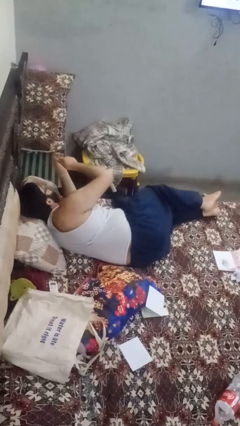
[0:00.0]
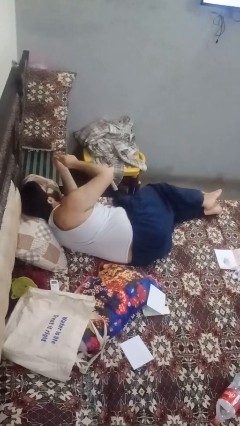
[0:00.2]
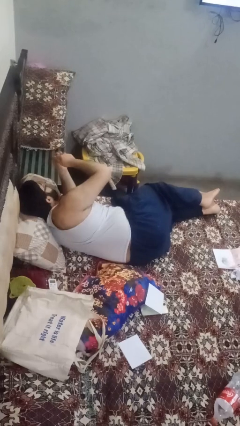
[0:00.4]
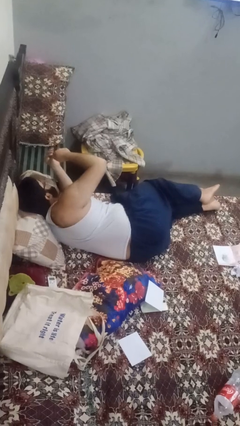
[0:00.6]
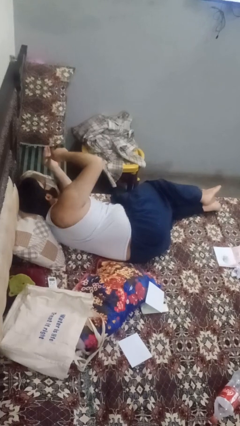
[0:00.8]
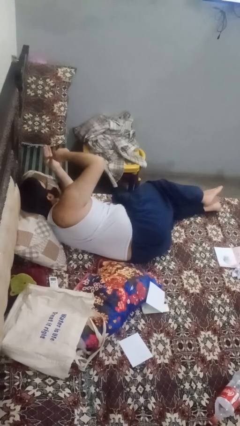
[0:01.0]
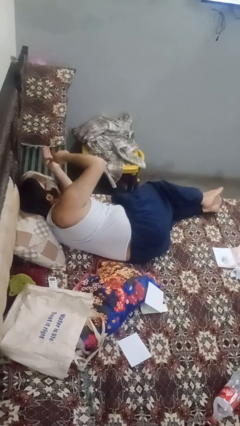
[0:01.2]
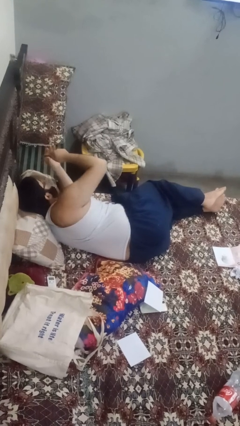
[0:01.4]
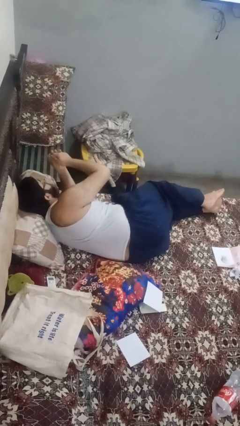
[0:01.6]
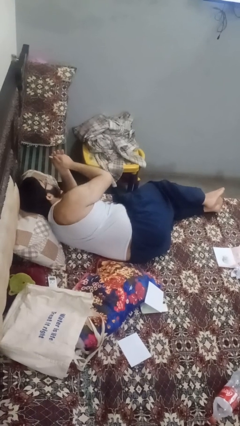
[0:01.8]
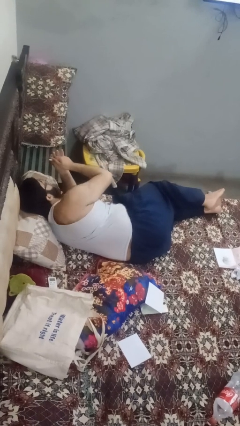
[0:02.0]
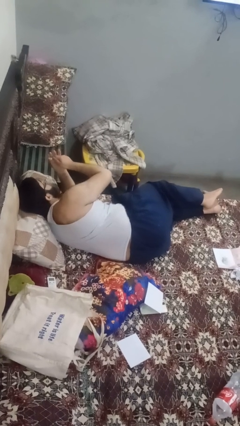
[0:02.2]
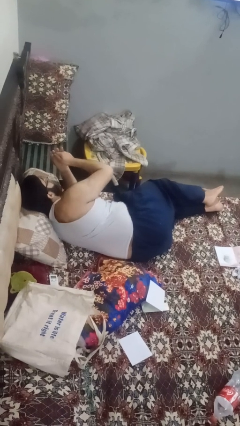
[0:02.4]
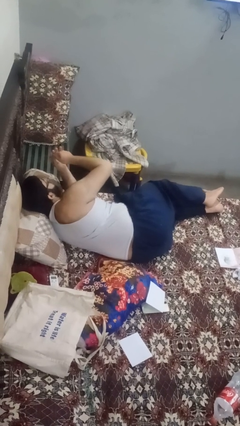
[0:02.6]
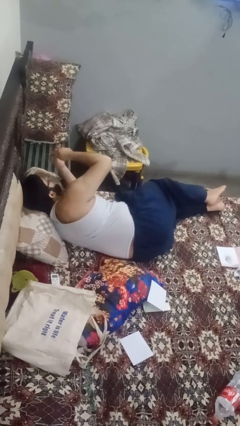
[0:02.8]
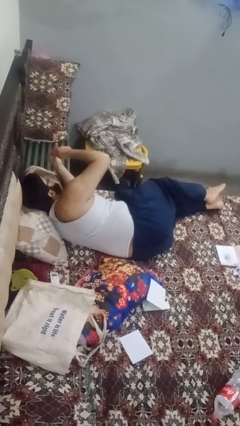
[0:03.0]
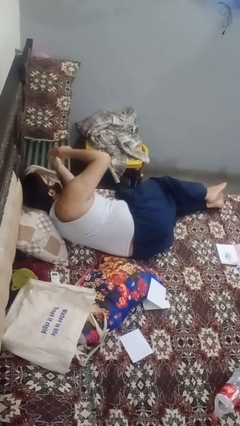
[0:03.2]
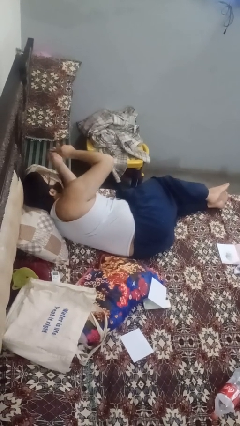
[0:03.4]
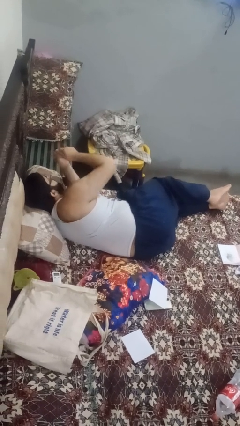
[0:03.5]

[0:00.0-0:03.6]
person files fingernails

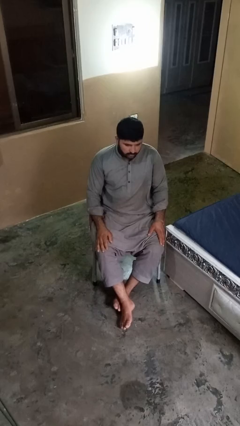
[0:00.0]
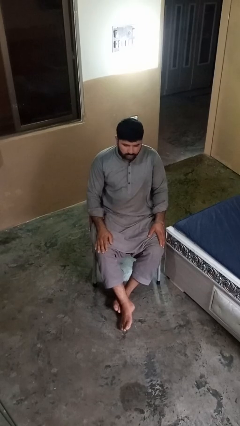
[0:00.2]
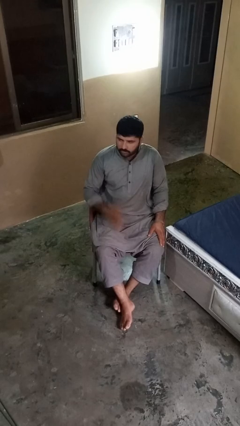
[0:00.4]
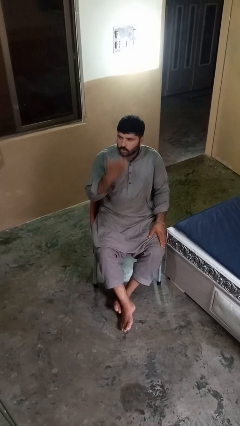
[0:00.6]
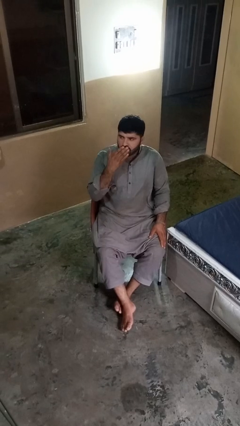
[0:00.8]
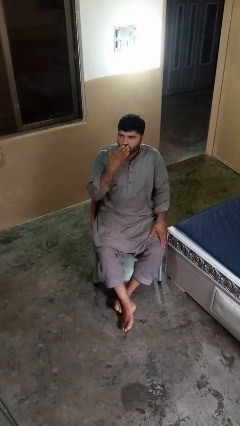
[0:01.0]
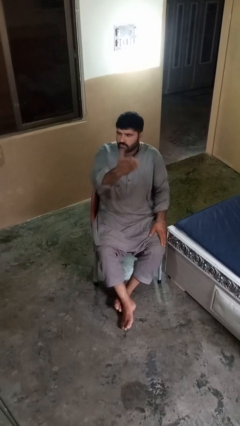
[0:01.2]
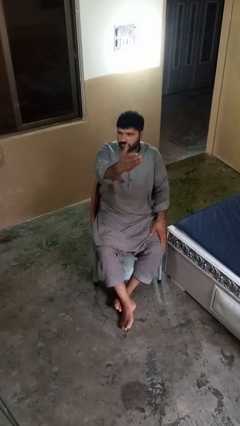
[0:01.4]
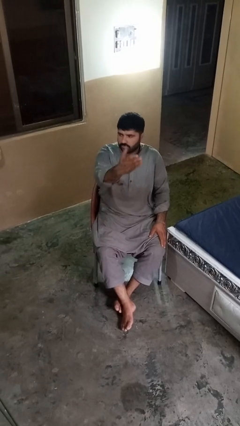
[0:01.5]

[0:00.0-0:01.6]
person gestures blow kiss

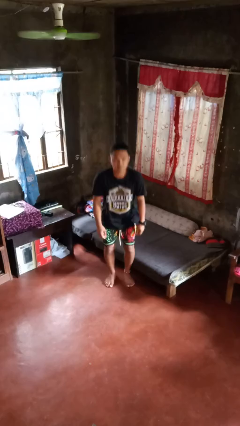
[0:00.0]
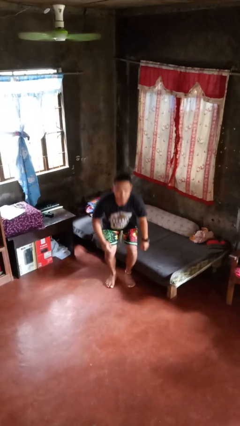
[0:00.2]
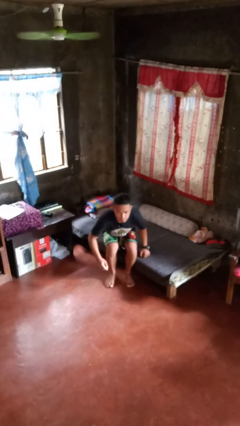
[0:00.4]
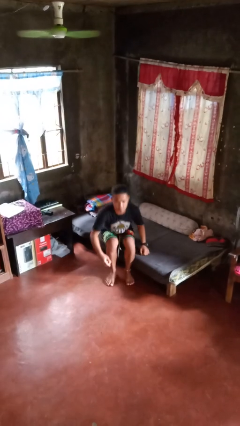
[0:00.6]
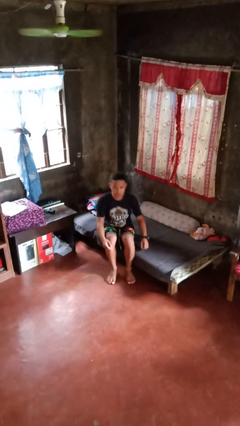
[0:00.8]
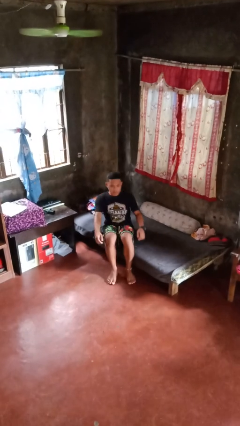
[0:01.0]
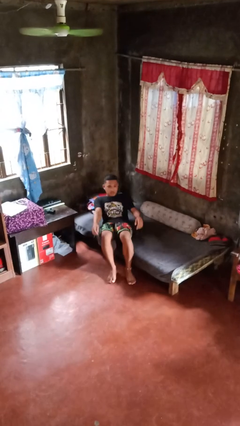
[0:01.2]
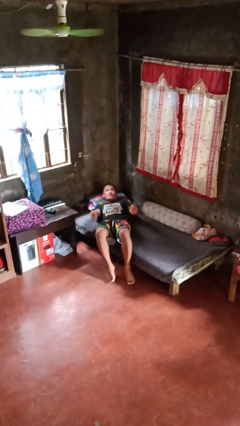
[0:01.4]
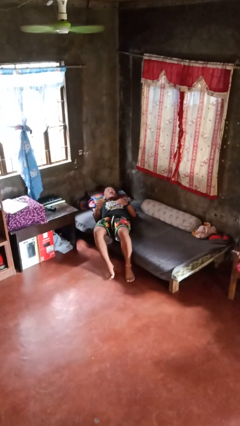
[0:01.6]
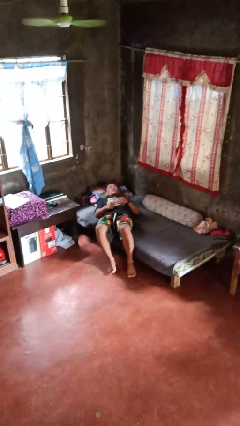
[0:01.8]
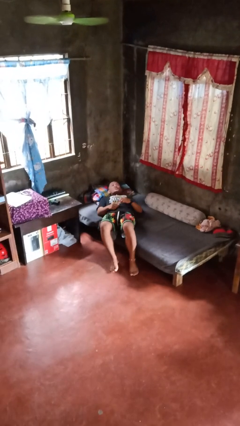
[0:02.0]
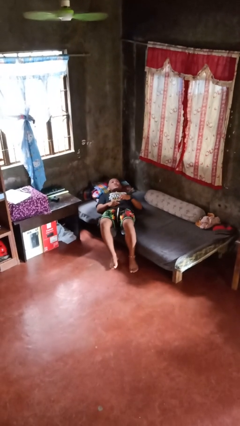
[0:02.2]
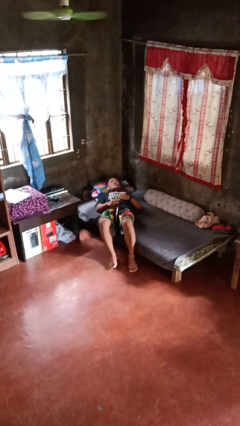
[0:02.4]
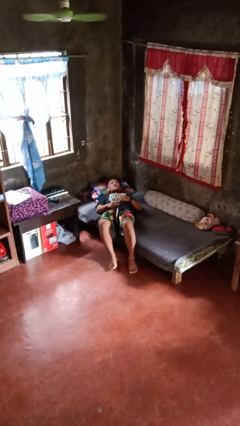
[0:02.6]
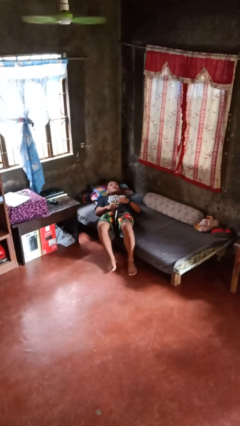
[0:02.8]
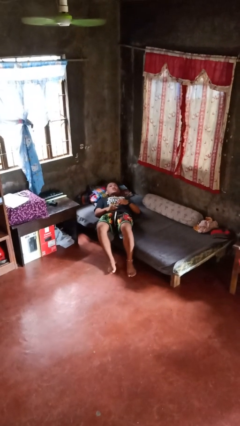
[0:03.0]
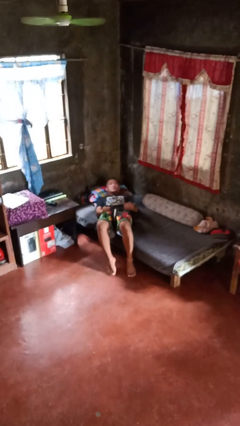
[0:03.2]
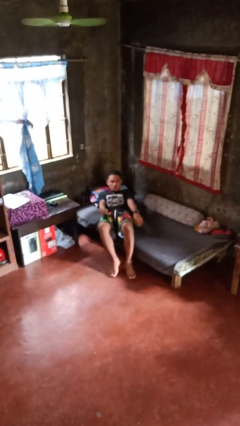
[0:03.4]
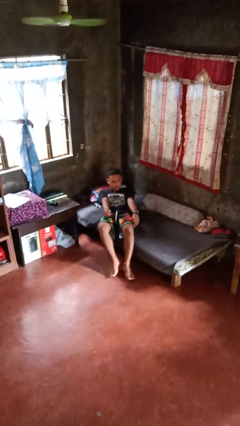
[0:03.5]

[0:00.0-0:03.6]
person lies down on bed

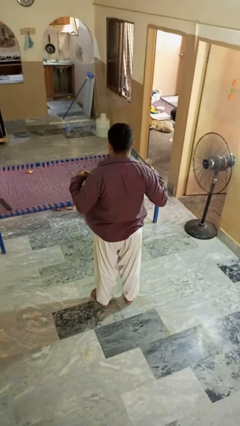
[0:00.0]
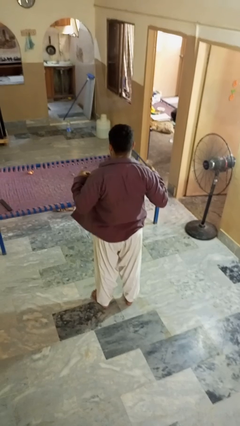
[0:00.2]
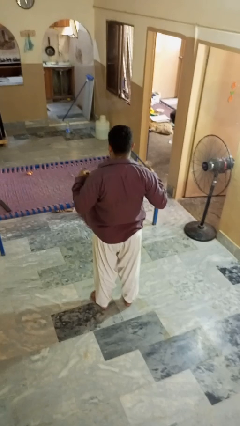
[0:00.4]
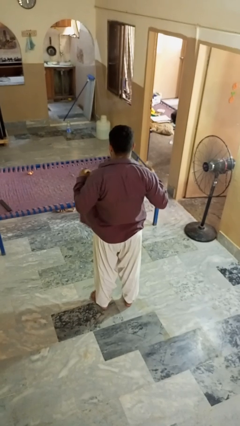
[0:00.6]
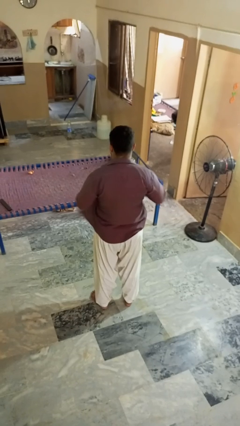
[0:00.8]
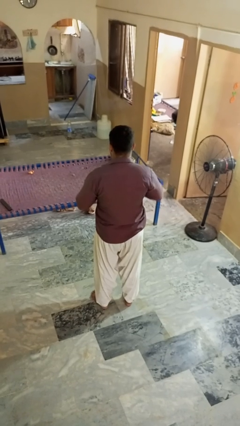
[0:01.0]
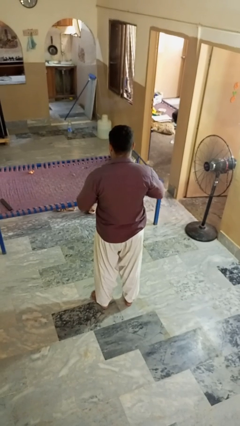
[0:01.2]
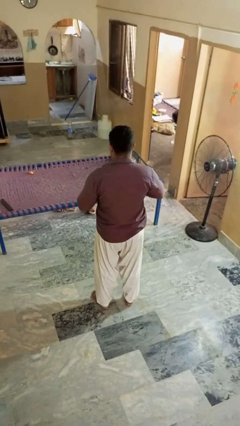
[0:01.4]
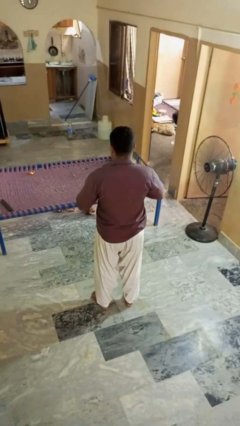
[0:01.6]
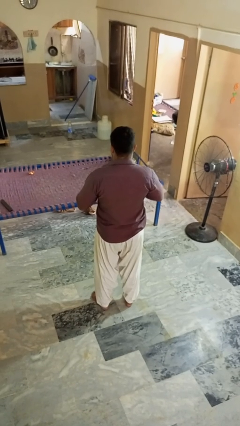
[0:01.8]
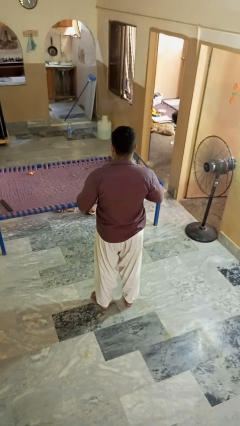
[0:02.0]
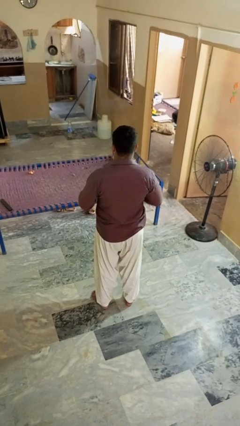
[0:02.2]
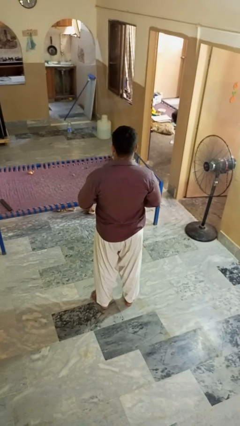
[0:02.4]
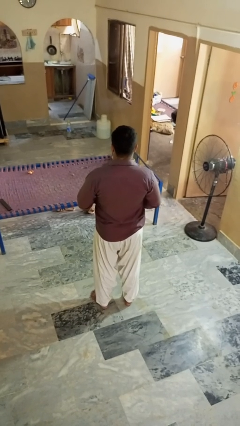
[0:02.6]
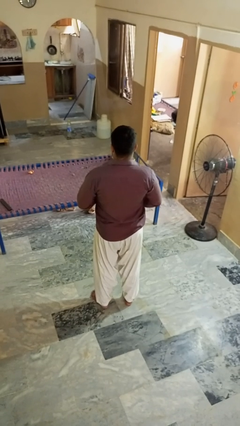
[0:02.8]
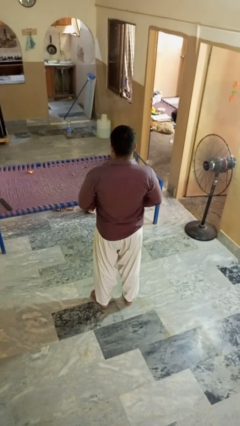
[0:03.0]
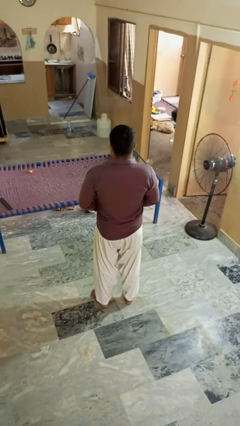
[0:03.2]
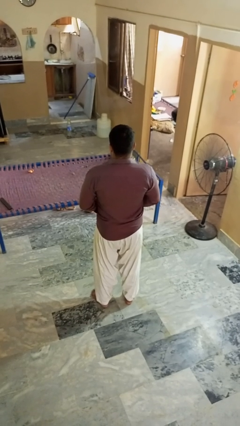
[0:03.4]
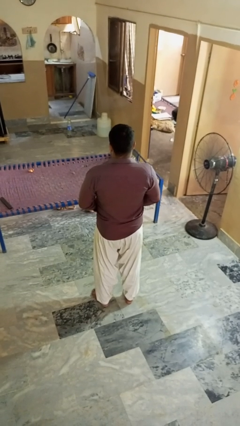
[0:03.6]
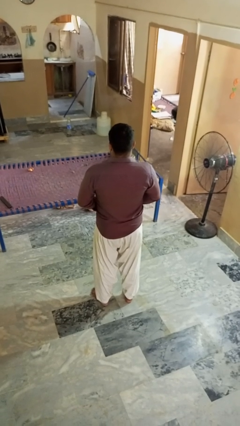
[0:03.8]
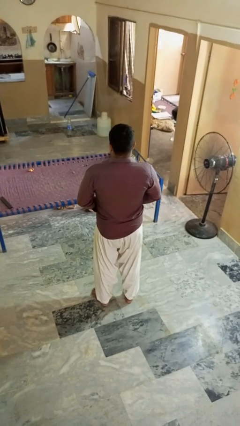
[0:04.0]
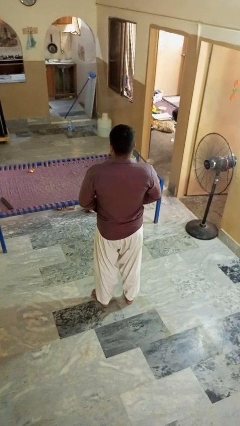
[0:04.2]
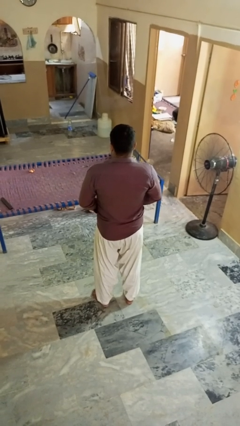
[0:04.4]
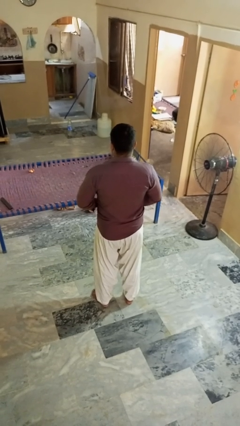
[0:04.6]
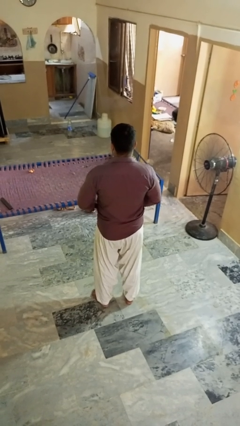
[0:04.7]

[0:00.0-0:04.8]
person buttons shirt

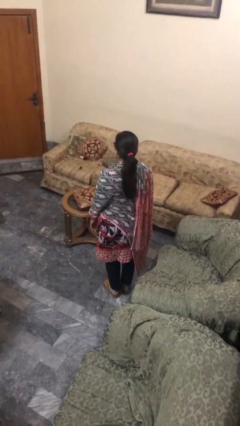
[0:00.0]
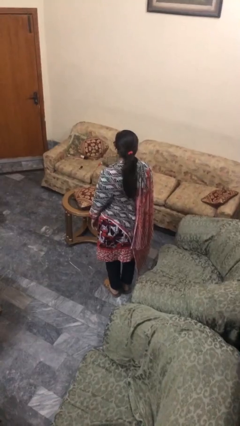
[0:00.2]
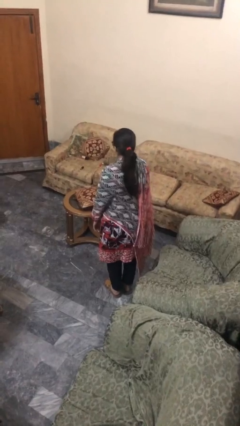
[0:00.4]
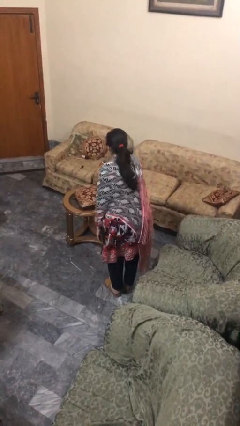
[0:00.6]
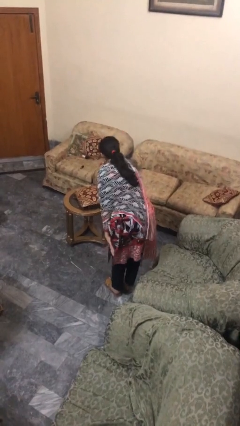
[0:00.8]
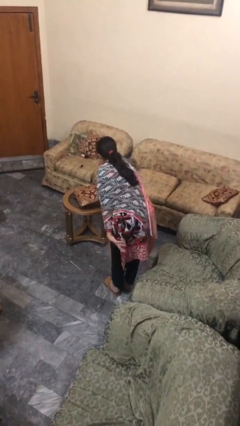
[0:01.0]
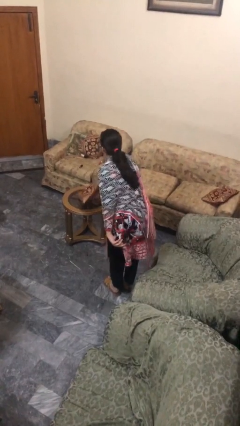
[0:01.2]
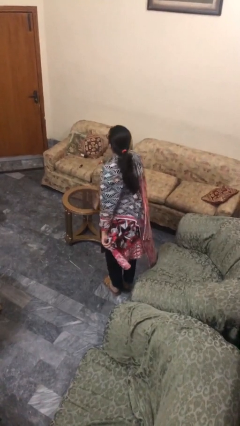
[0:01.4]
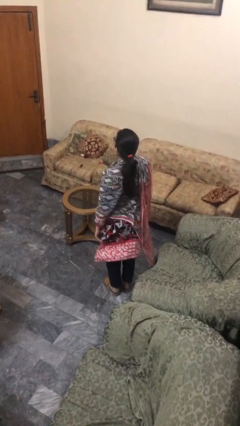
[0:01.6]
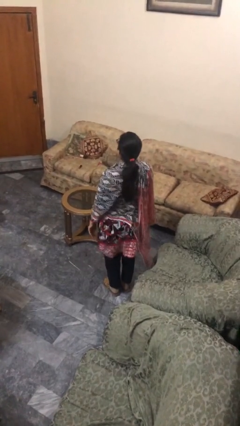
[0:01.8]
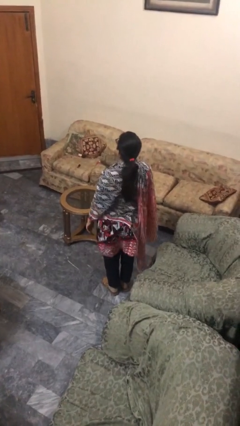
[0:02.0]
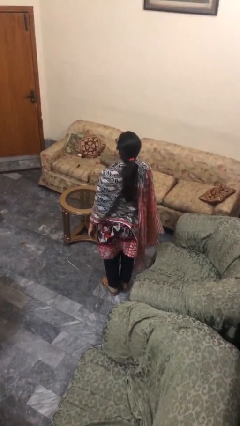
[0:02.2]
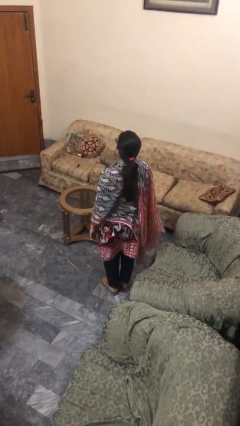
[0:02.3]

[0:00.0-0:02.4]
person picks up object from table

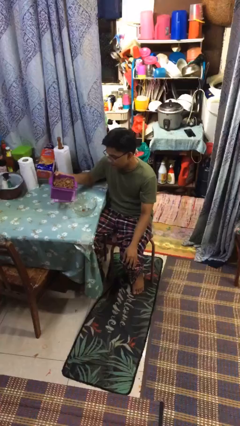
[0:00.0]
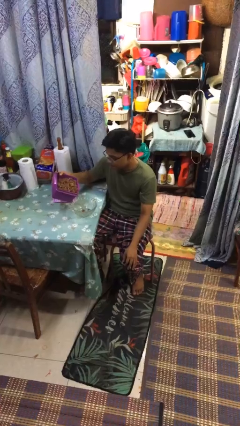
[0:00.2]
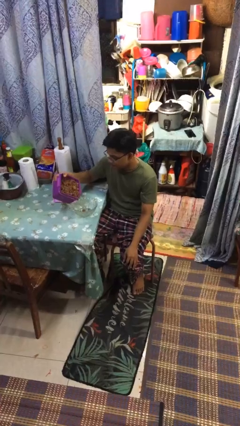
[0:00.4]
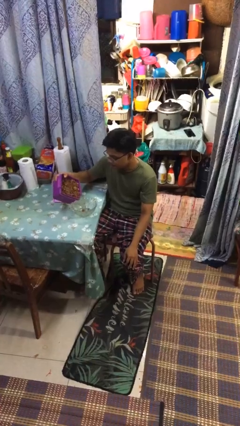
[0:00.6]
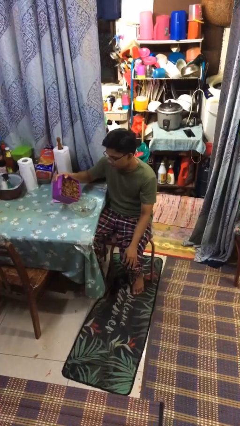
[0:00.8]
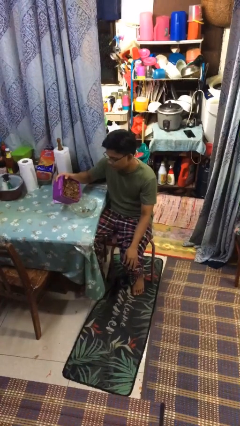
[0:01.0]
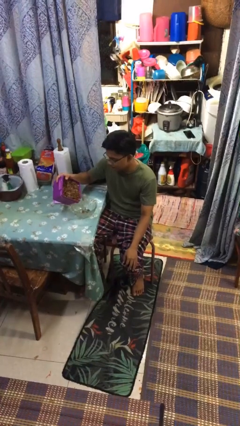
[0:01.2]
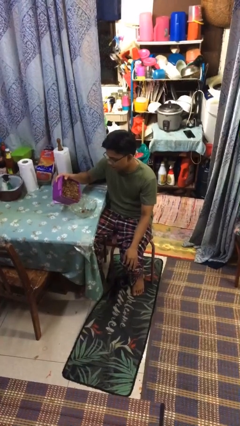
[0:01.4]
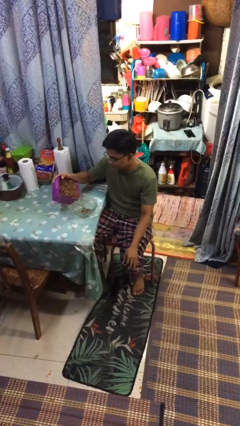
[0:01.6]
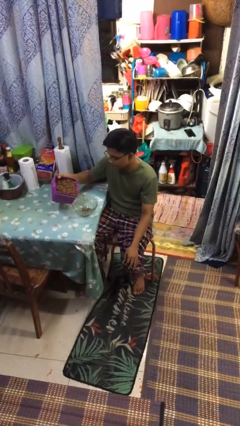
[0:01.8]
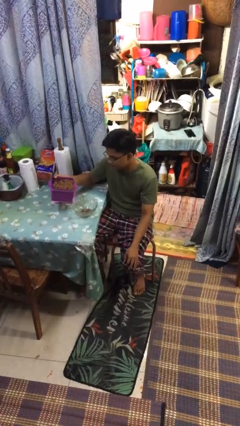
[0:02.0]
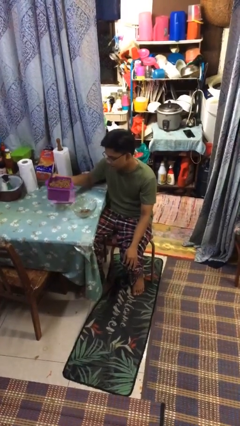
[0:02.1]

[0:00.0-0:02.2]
person pours into bowl
